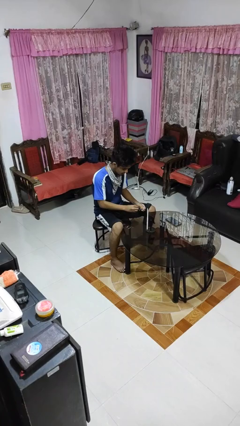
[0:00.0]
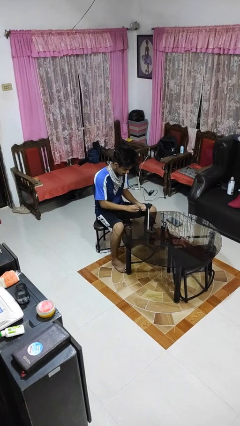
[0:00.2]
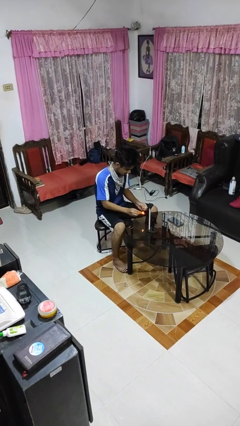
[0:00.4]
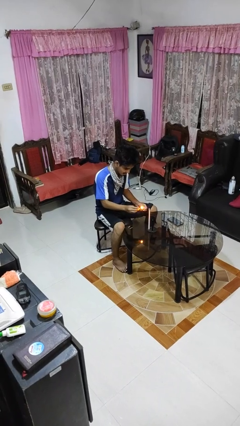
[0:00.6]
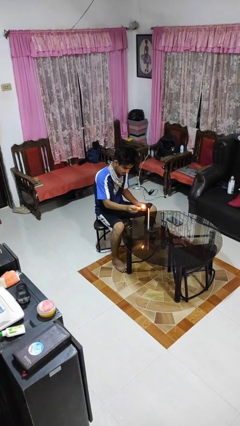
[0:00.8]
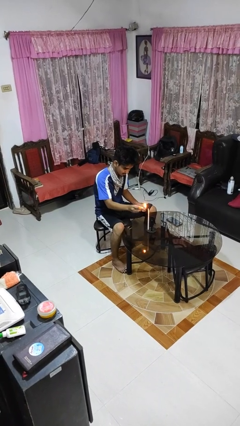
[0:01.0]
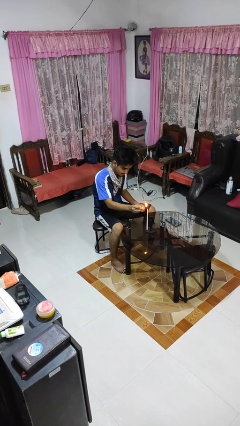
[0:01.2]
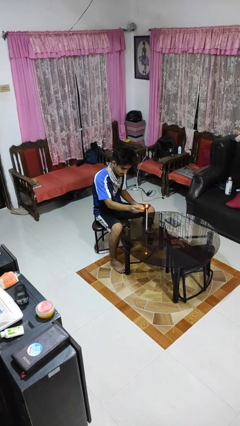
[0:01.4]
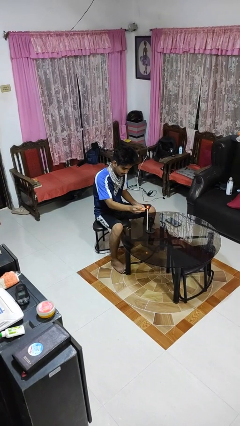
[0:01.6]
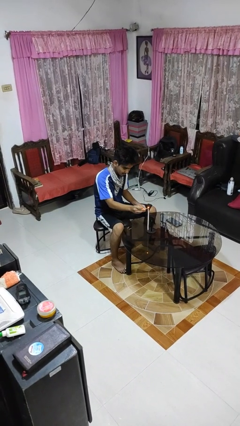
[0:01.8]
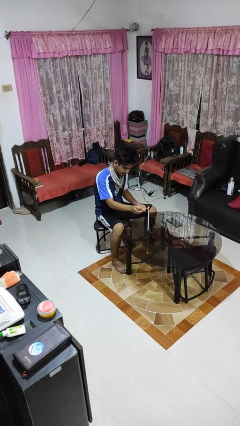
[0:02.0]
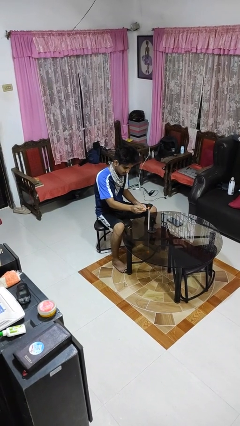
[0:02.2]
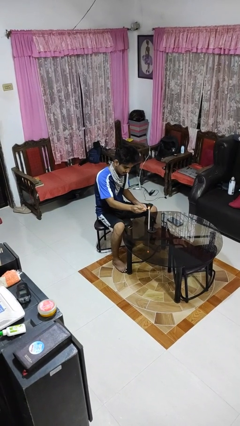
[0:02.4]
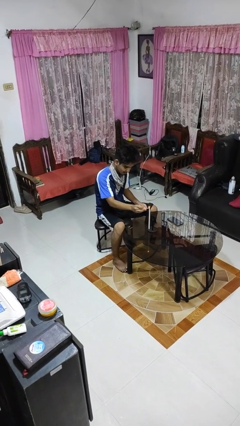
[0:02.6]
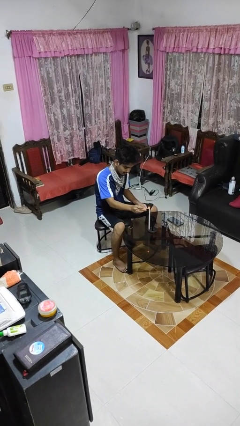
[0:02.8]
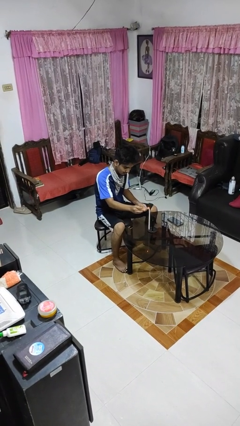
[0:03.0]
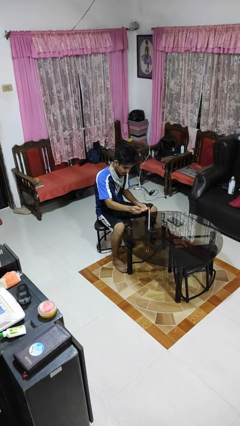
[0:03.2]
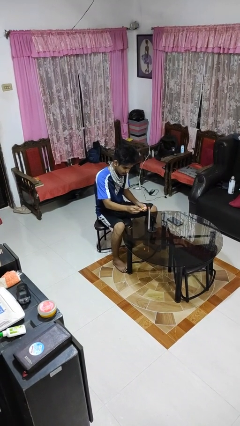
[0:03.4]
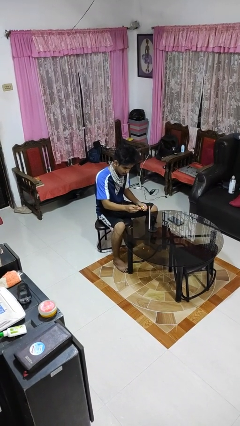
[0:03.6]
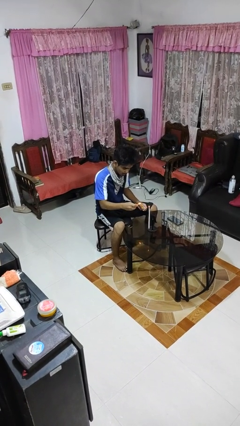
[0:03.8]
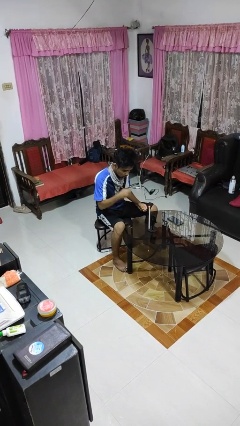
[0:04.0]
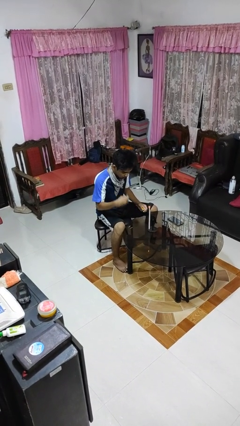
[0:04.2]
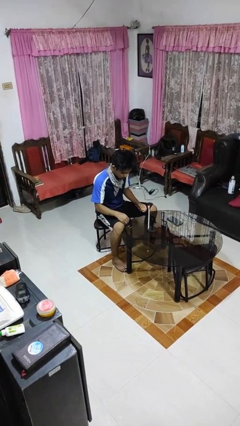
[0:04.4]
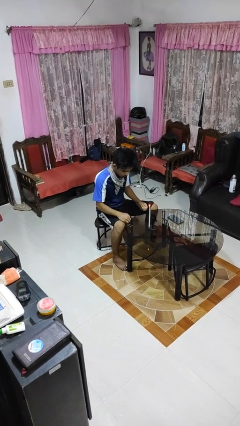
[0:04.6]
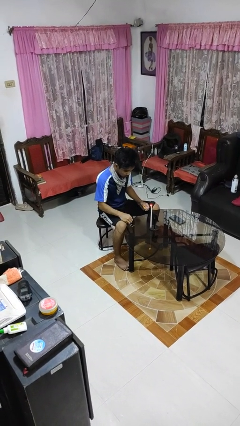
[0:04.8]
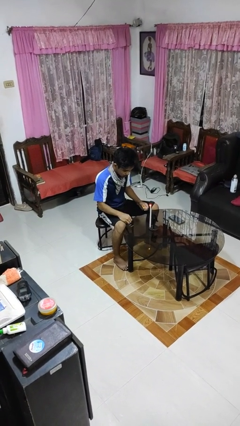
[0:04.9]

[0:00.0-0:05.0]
person lights candle

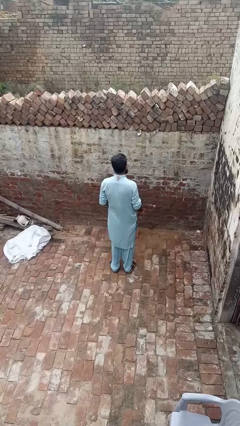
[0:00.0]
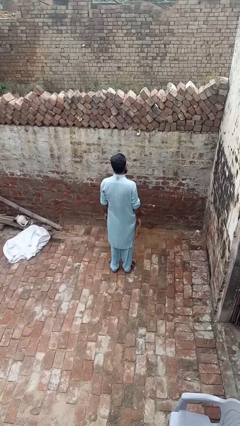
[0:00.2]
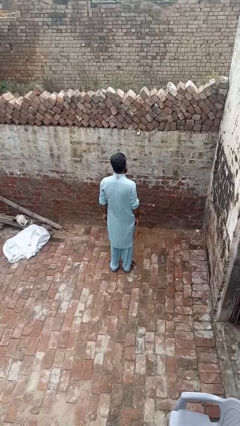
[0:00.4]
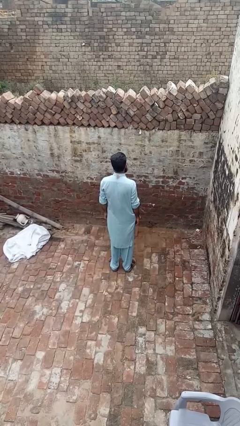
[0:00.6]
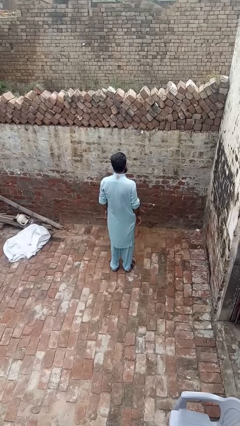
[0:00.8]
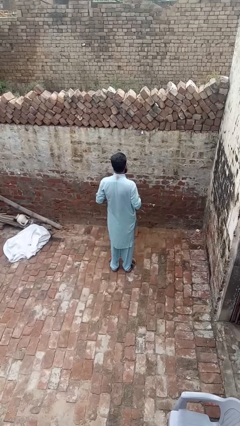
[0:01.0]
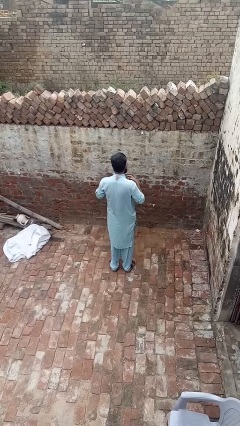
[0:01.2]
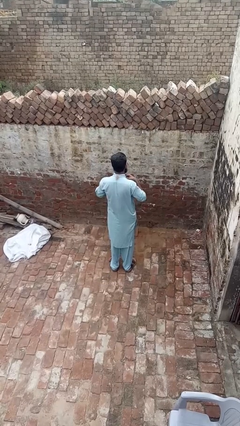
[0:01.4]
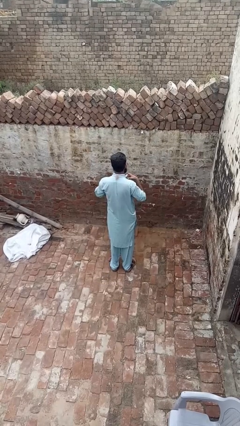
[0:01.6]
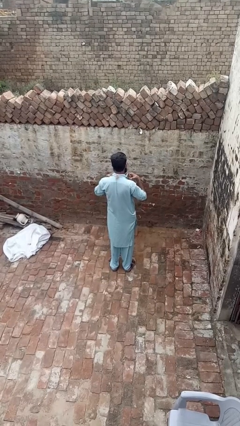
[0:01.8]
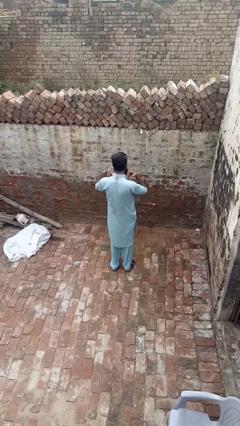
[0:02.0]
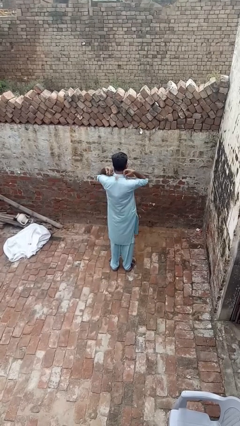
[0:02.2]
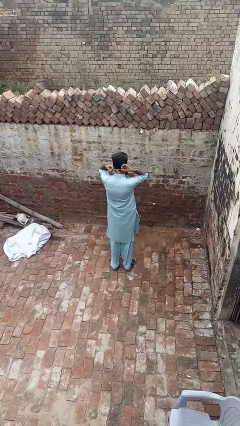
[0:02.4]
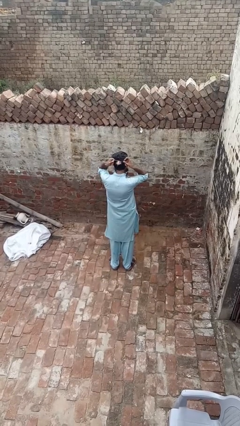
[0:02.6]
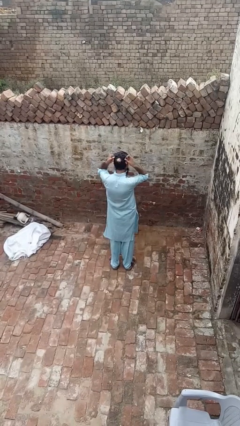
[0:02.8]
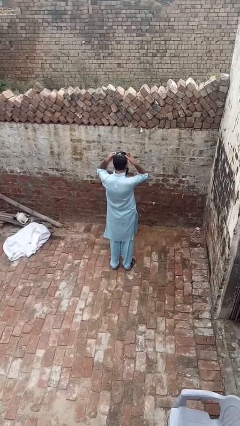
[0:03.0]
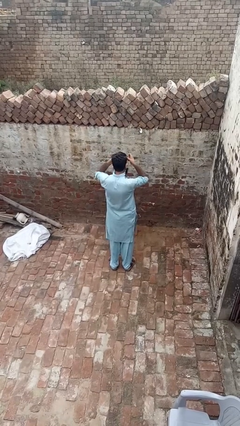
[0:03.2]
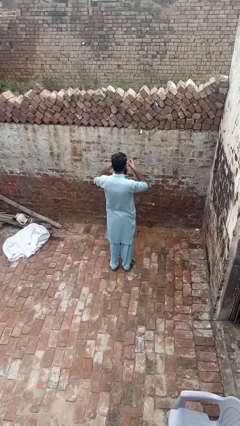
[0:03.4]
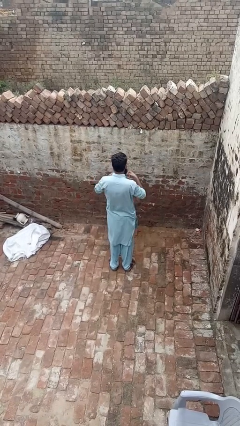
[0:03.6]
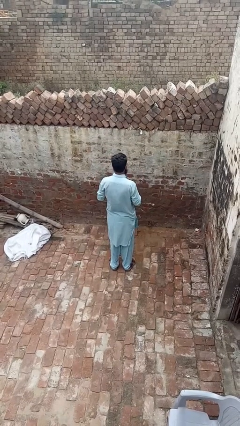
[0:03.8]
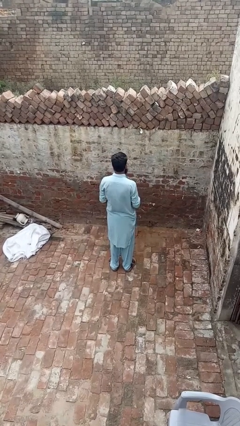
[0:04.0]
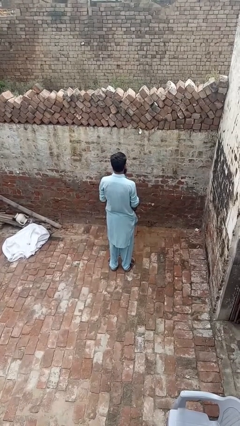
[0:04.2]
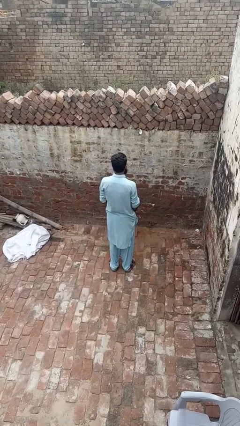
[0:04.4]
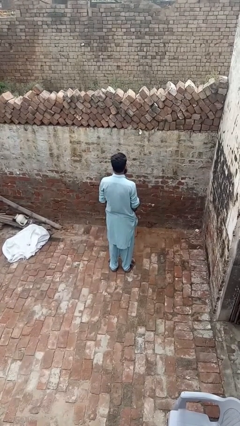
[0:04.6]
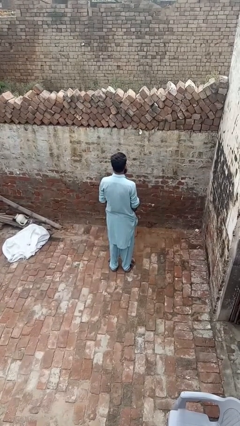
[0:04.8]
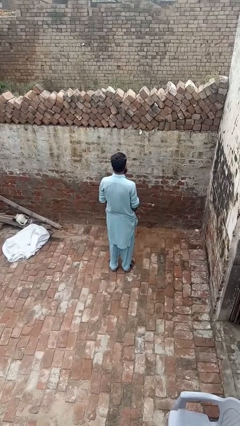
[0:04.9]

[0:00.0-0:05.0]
person takes off necklace

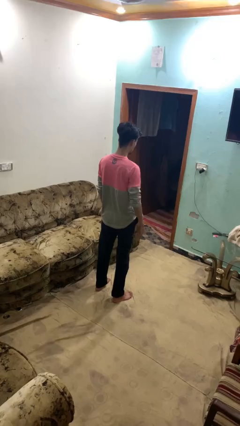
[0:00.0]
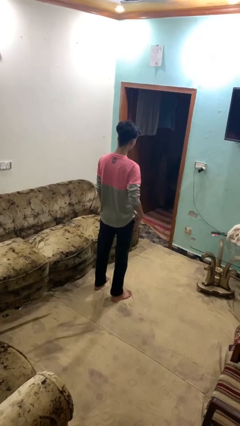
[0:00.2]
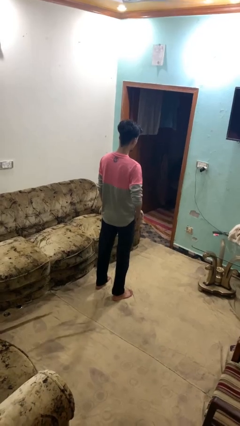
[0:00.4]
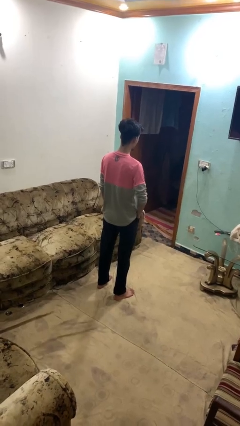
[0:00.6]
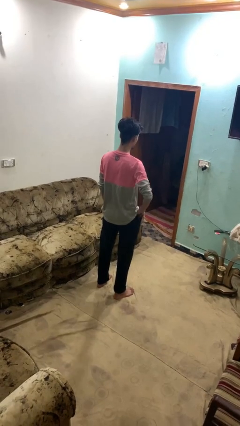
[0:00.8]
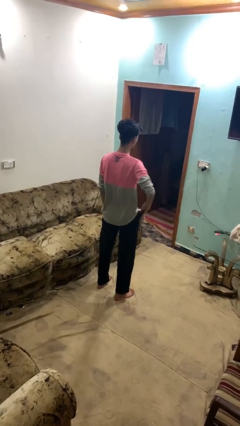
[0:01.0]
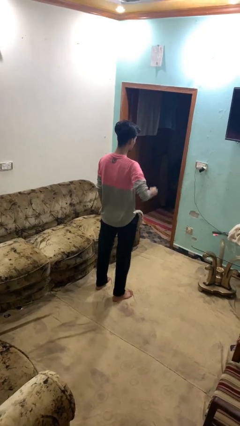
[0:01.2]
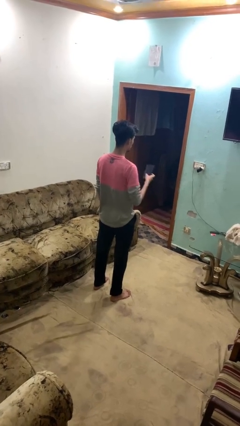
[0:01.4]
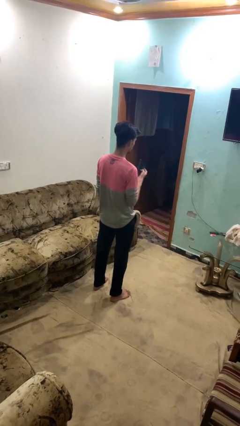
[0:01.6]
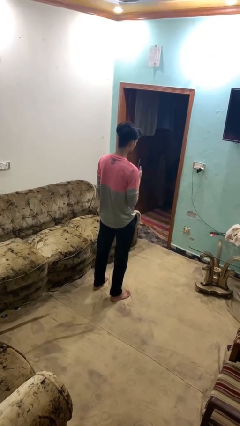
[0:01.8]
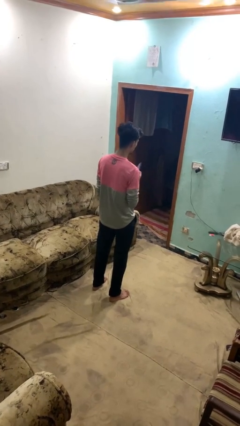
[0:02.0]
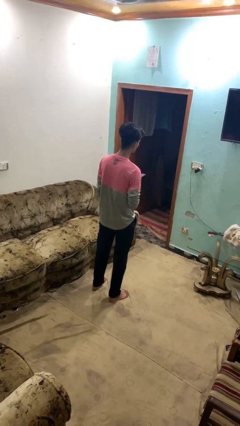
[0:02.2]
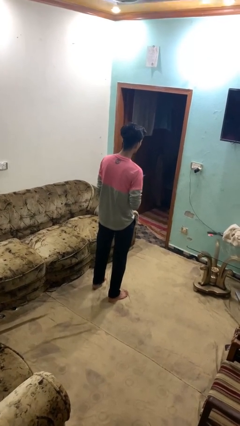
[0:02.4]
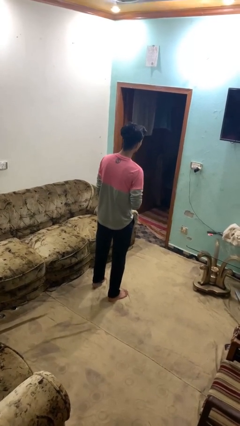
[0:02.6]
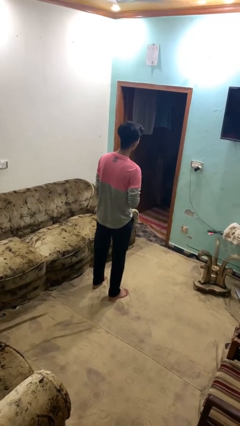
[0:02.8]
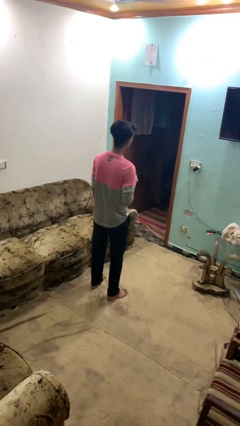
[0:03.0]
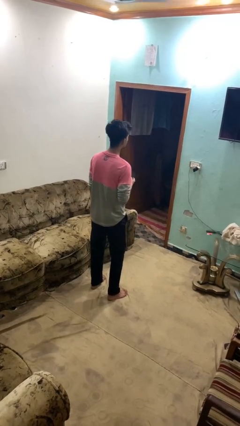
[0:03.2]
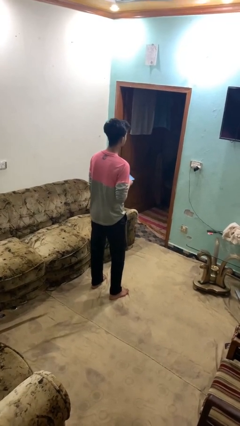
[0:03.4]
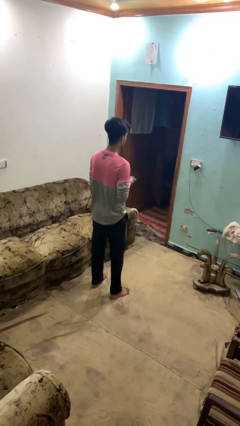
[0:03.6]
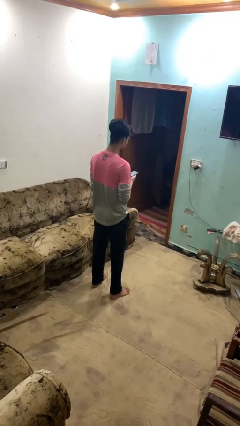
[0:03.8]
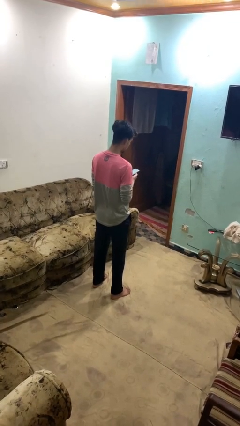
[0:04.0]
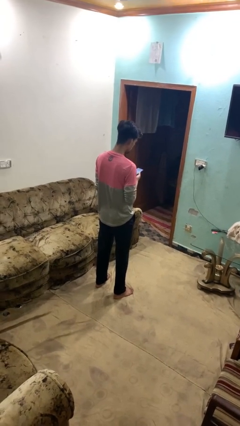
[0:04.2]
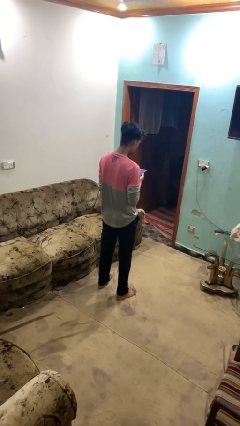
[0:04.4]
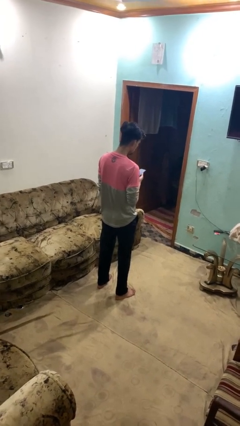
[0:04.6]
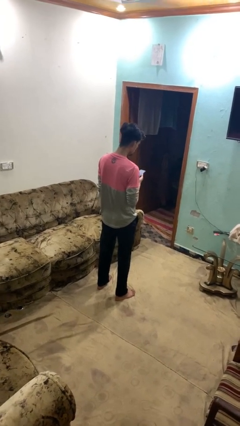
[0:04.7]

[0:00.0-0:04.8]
person takes phone from pocket

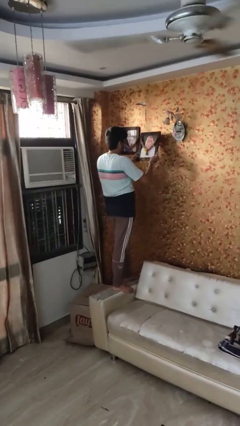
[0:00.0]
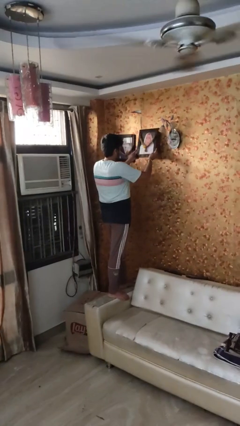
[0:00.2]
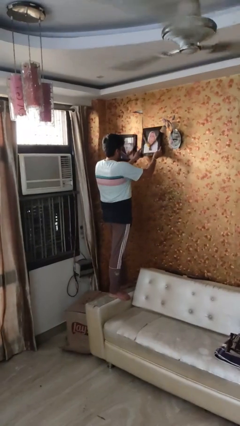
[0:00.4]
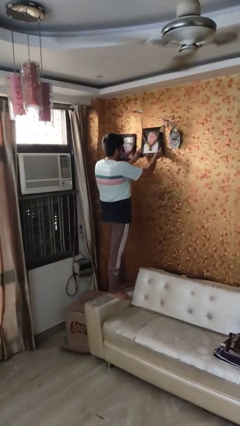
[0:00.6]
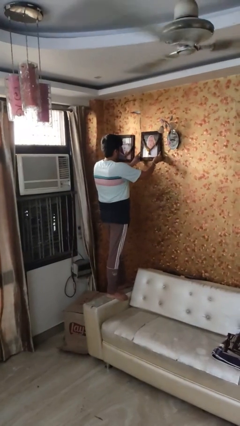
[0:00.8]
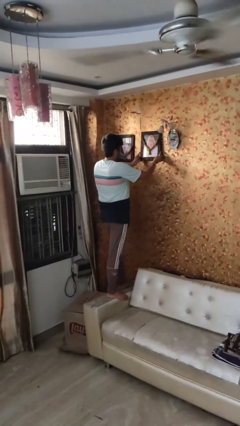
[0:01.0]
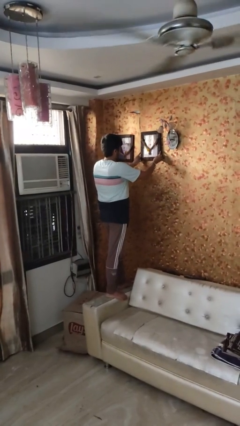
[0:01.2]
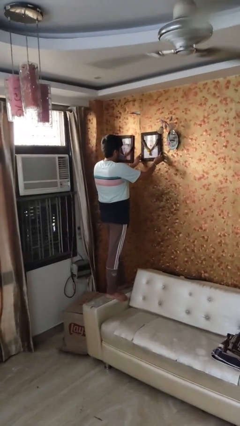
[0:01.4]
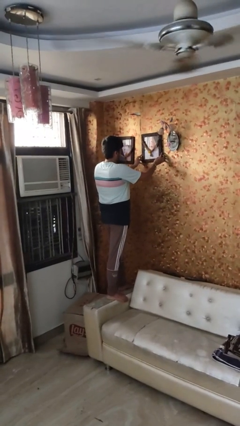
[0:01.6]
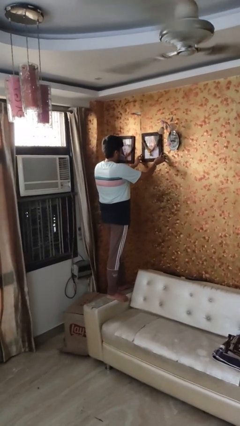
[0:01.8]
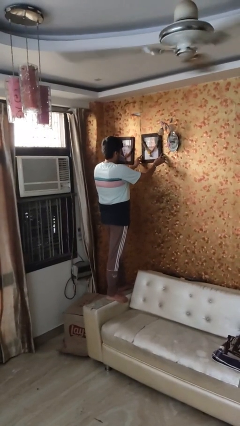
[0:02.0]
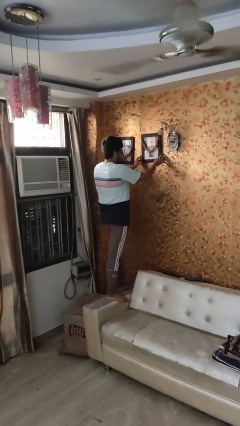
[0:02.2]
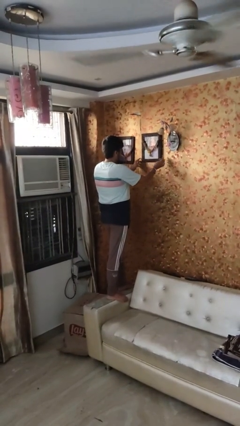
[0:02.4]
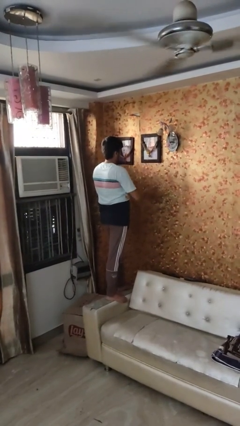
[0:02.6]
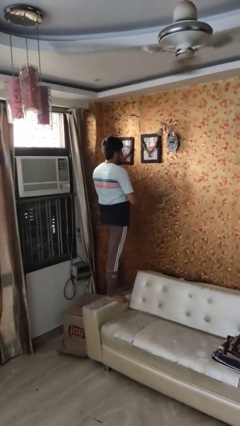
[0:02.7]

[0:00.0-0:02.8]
person puts up picture frame

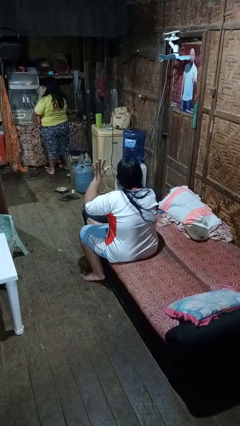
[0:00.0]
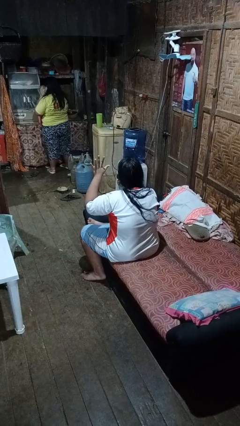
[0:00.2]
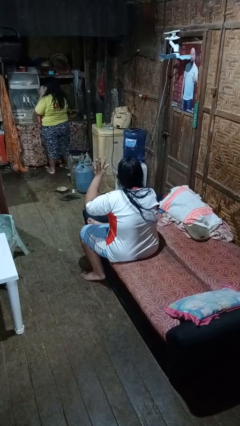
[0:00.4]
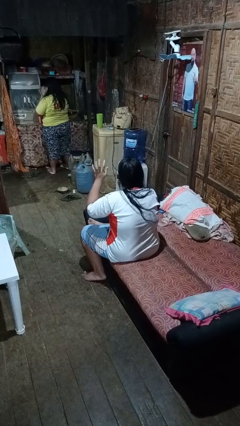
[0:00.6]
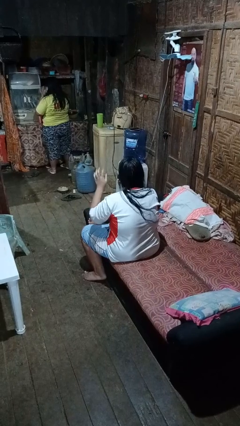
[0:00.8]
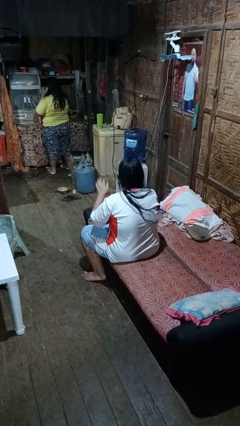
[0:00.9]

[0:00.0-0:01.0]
person gestures number five
